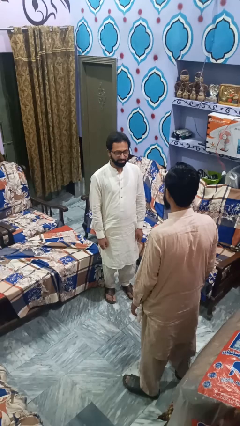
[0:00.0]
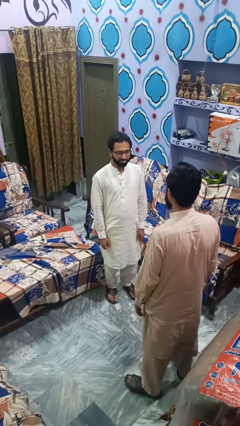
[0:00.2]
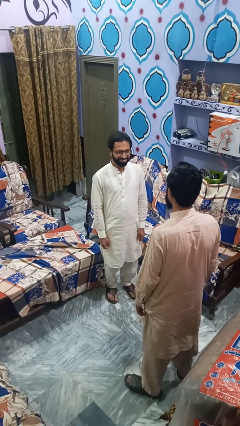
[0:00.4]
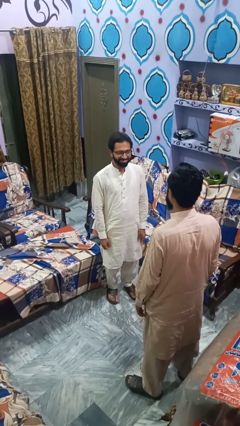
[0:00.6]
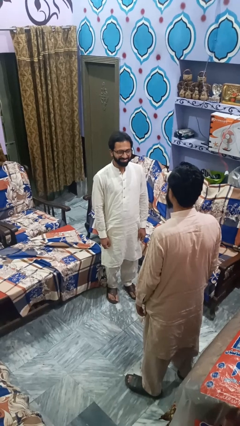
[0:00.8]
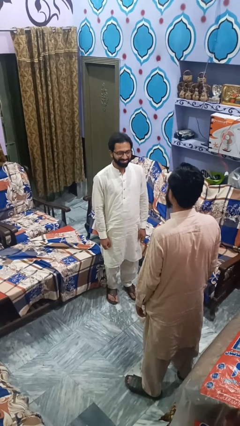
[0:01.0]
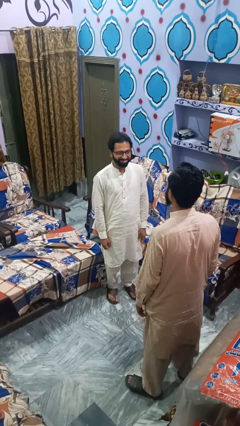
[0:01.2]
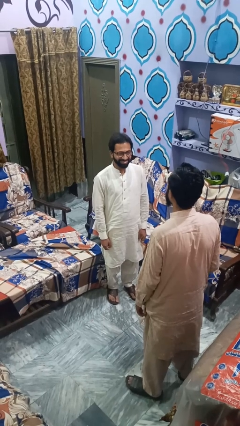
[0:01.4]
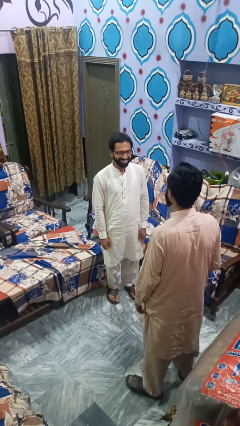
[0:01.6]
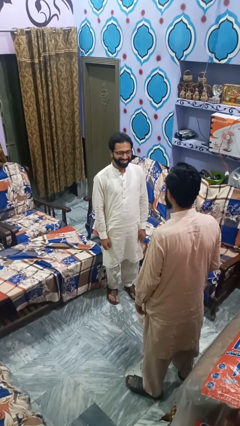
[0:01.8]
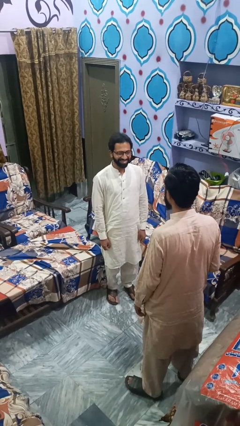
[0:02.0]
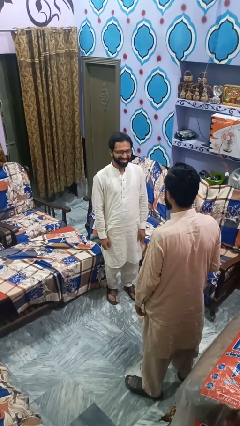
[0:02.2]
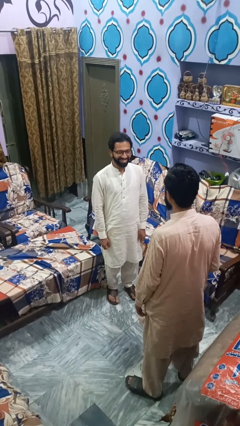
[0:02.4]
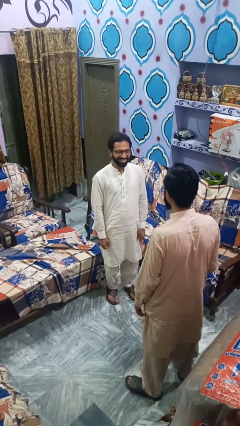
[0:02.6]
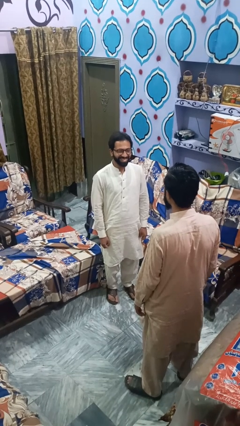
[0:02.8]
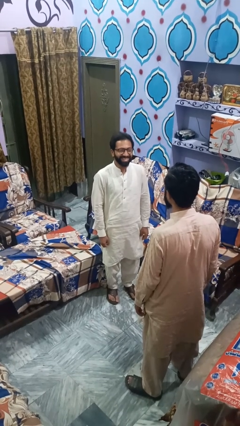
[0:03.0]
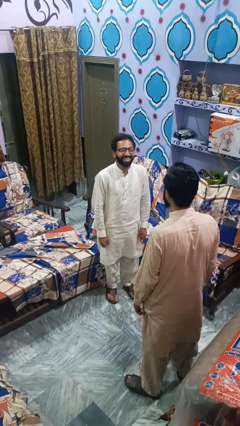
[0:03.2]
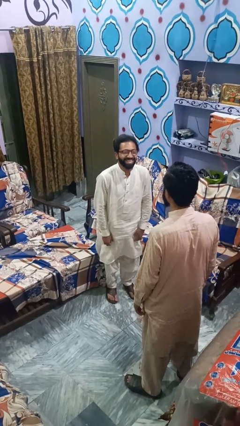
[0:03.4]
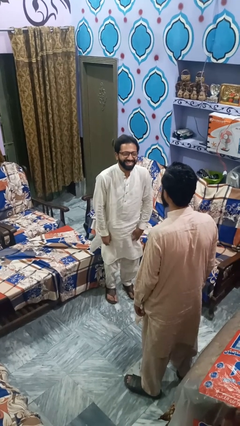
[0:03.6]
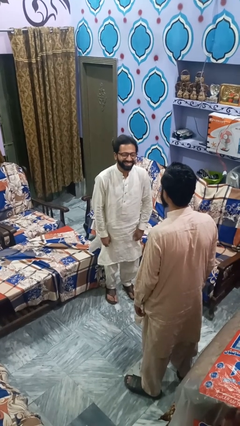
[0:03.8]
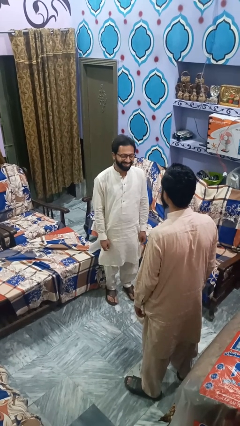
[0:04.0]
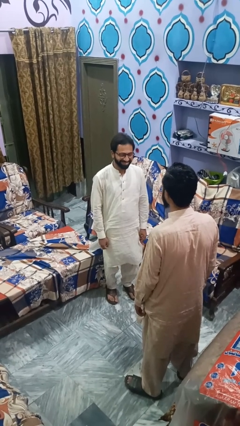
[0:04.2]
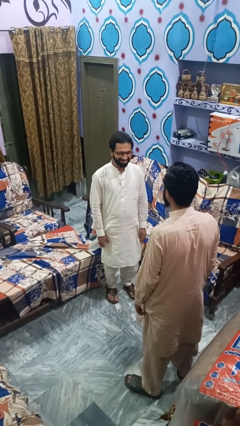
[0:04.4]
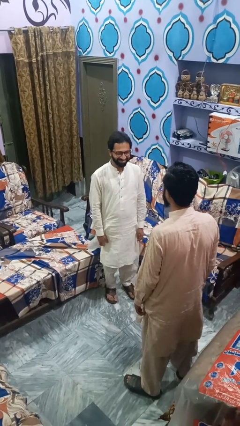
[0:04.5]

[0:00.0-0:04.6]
person laughs with person

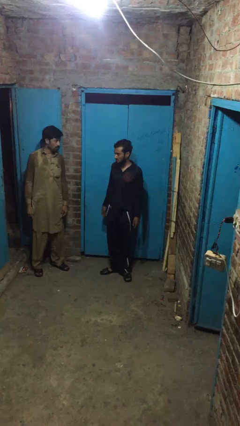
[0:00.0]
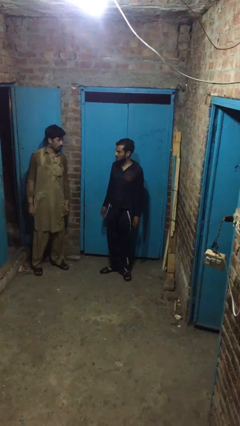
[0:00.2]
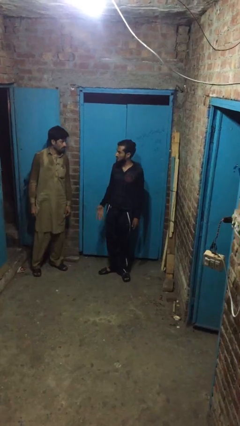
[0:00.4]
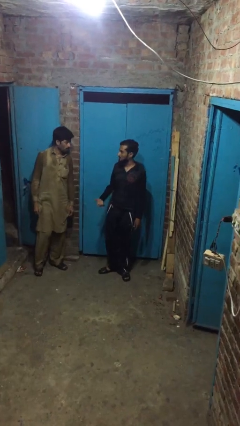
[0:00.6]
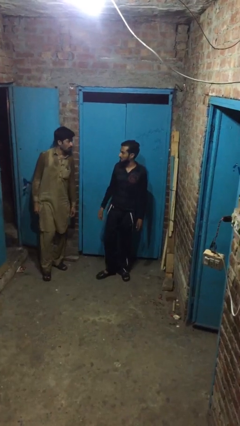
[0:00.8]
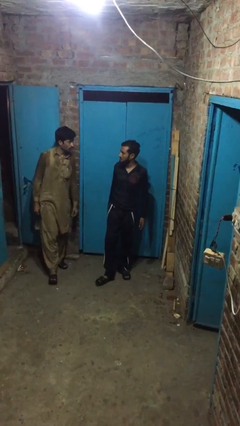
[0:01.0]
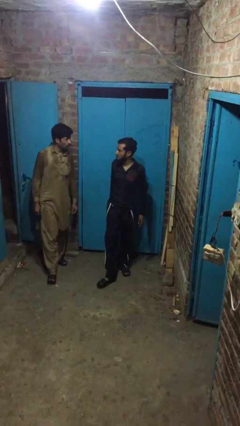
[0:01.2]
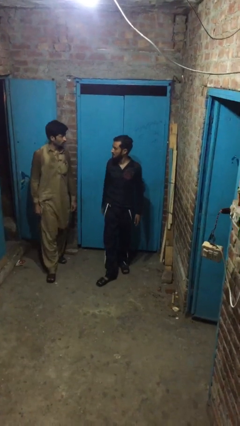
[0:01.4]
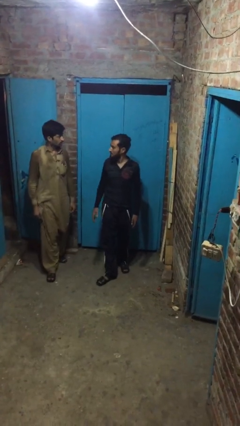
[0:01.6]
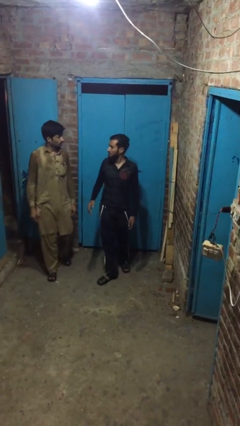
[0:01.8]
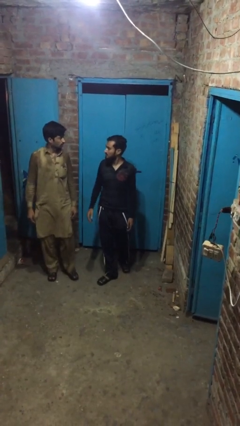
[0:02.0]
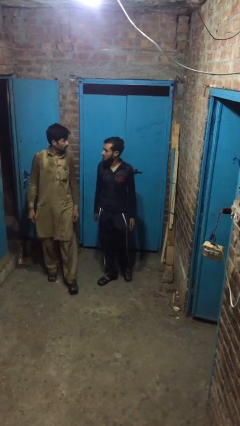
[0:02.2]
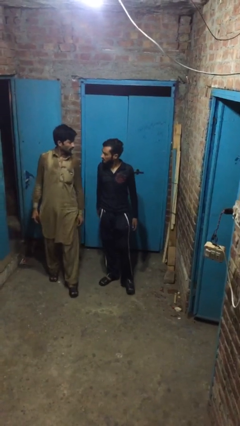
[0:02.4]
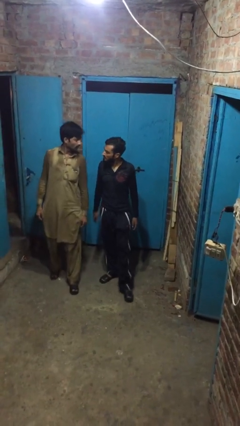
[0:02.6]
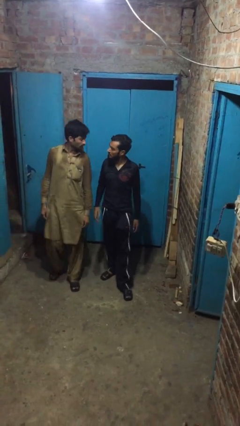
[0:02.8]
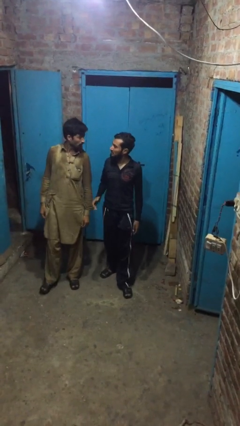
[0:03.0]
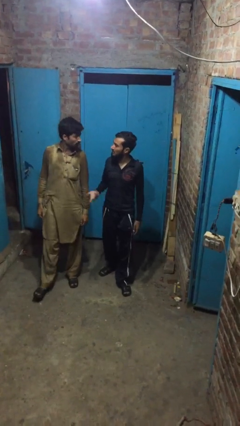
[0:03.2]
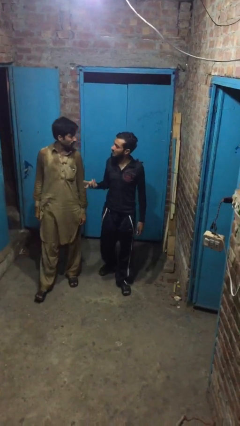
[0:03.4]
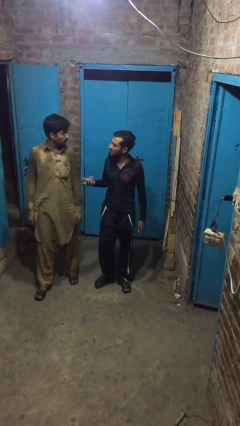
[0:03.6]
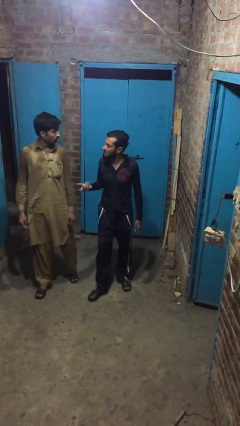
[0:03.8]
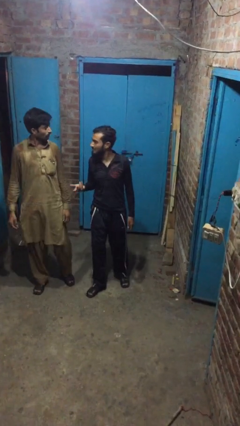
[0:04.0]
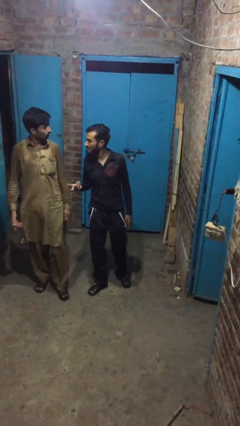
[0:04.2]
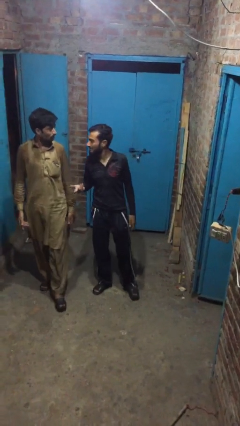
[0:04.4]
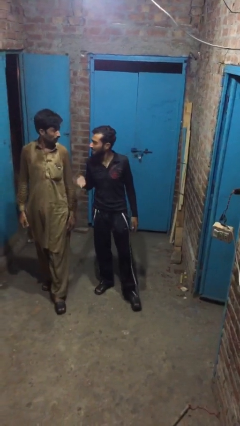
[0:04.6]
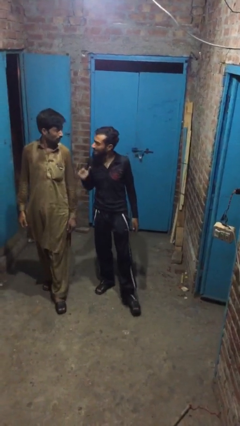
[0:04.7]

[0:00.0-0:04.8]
person talks to person

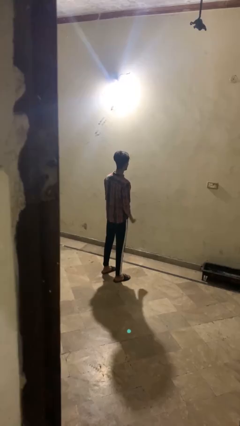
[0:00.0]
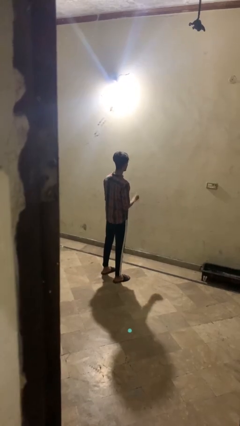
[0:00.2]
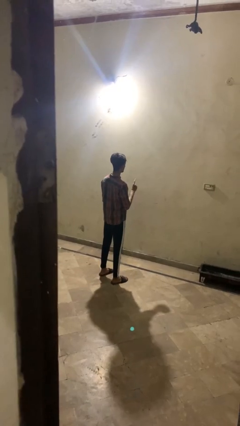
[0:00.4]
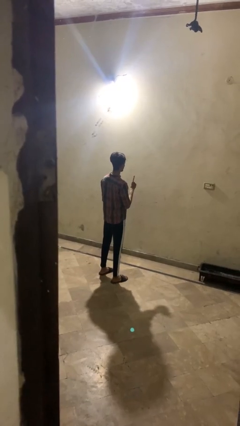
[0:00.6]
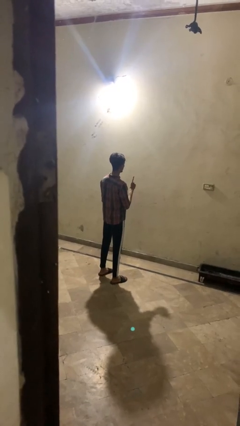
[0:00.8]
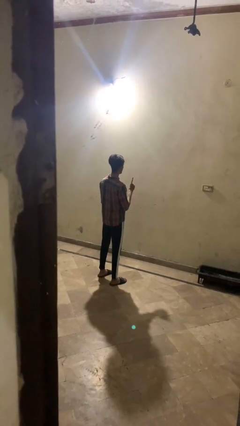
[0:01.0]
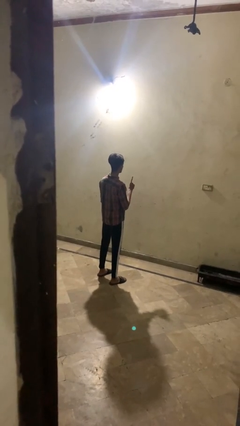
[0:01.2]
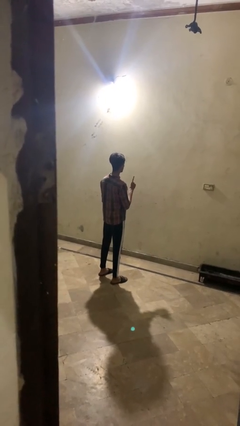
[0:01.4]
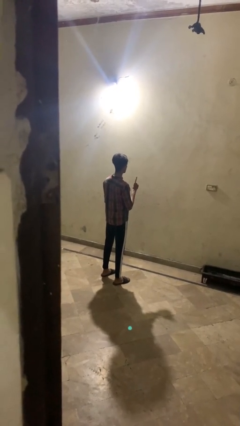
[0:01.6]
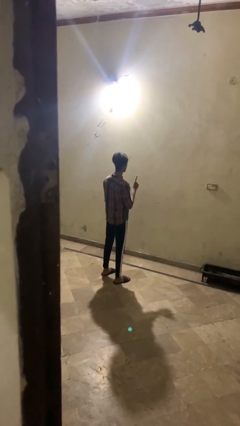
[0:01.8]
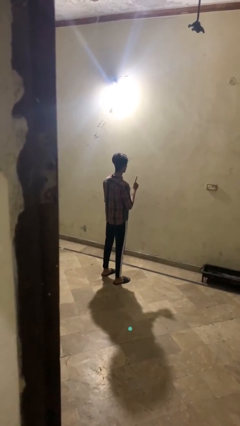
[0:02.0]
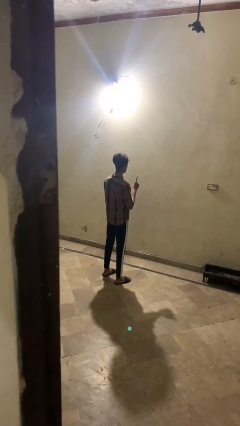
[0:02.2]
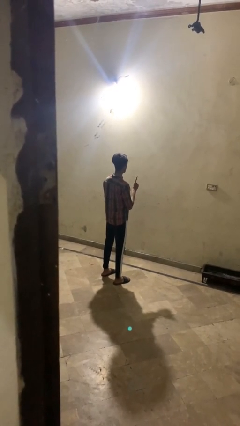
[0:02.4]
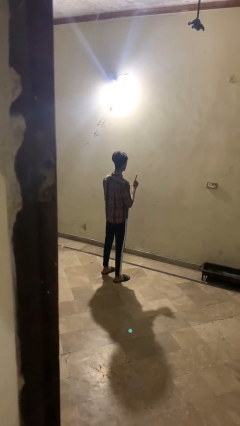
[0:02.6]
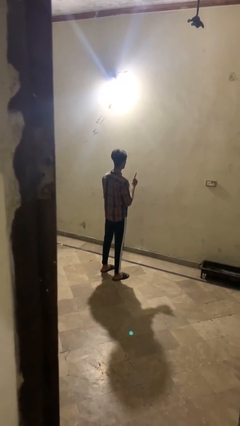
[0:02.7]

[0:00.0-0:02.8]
person gestures number one

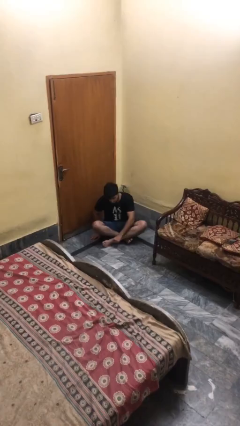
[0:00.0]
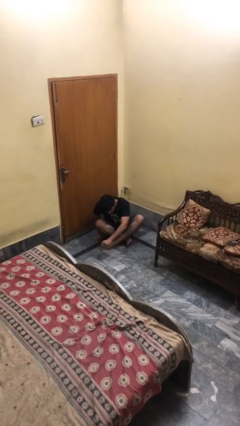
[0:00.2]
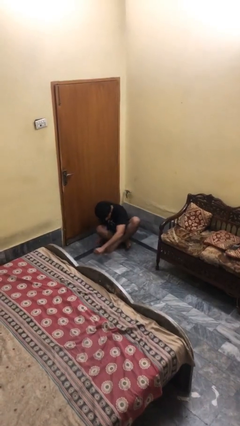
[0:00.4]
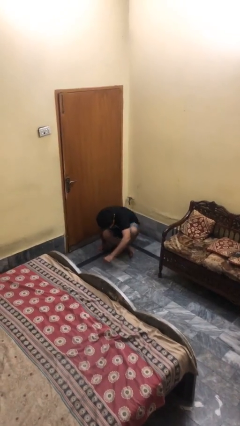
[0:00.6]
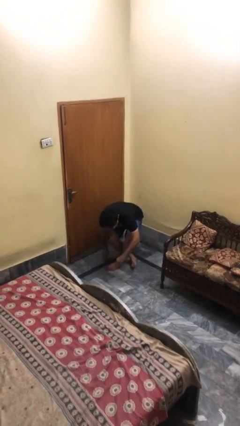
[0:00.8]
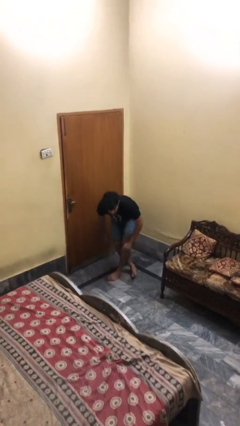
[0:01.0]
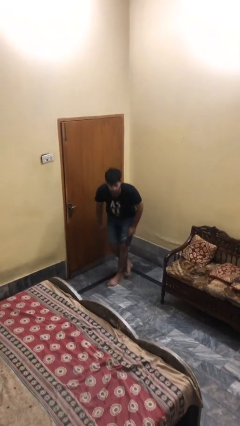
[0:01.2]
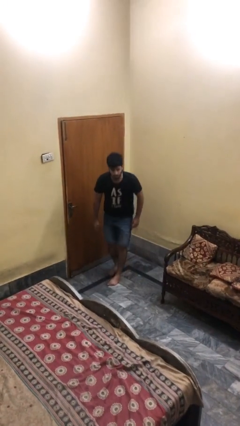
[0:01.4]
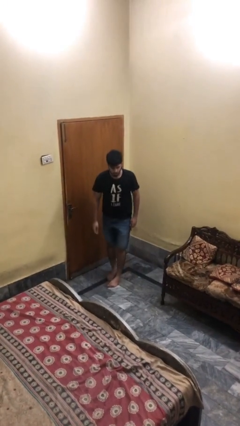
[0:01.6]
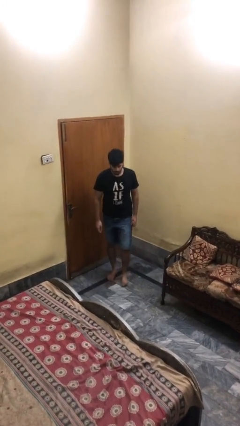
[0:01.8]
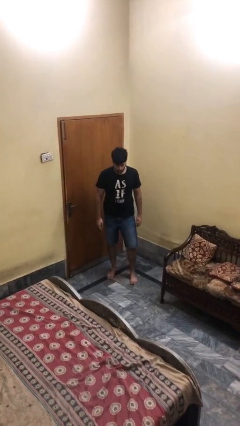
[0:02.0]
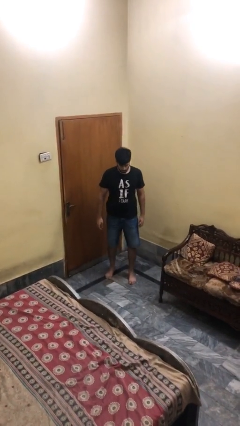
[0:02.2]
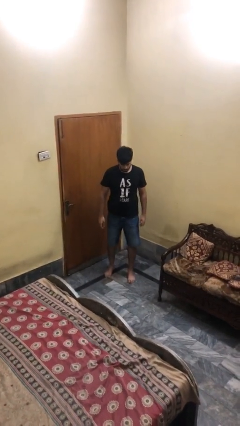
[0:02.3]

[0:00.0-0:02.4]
person stands up from floor

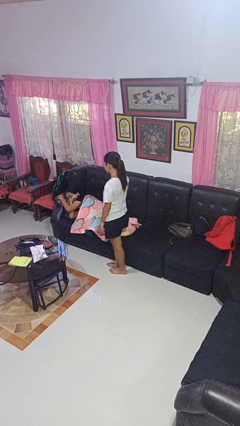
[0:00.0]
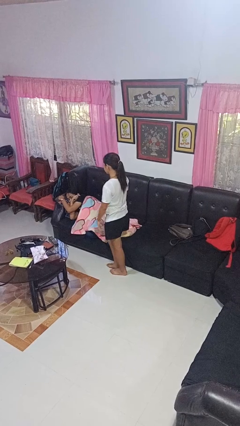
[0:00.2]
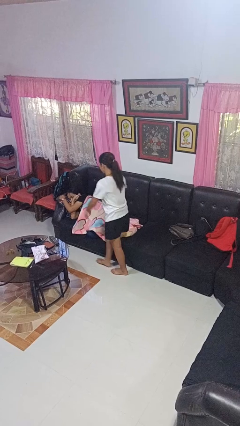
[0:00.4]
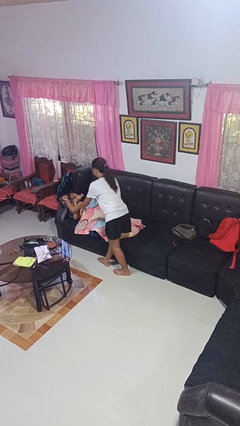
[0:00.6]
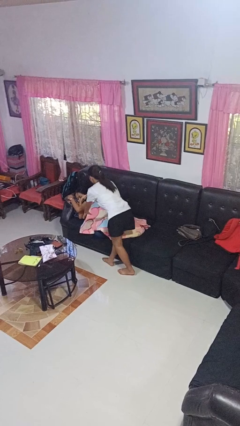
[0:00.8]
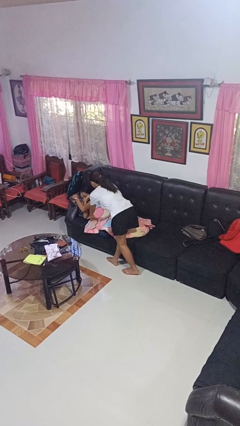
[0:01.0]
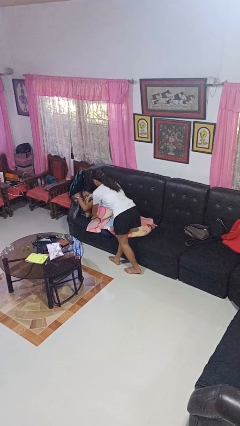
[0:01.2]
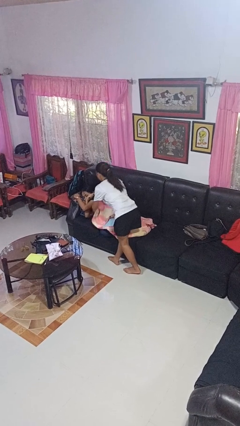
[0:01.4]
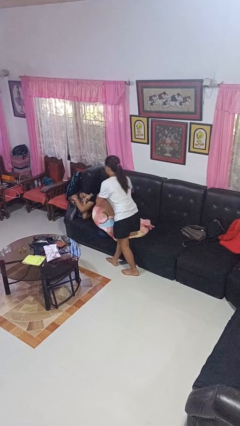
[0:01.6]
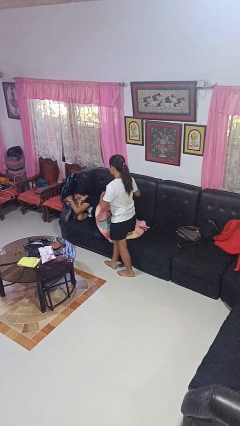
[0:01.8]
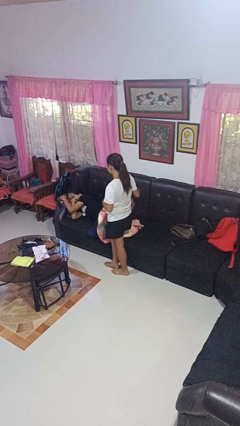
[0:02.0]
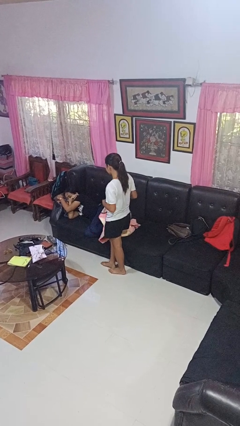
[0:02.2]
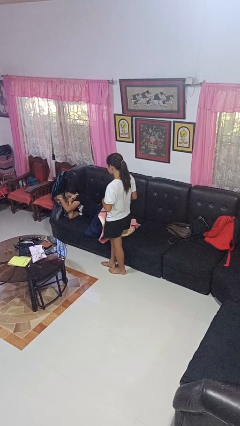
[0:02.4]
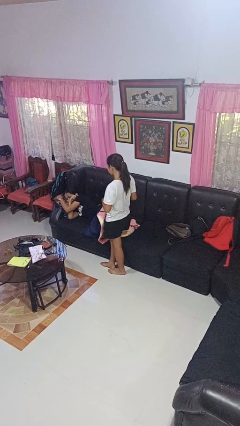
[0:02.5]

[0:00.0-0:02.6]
person uncovers friend with blanket

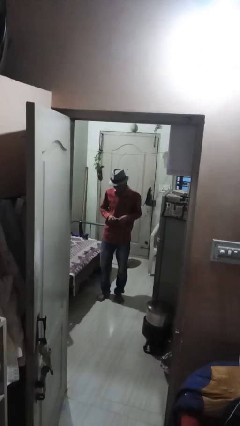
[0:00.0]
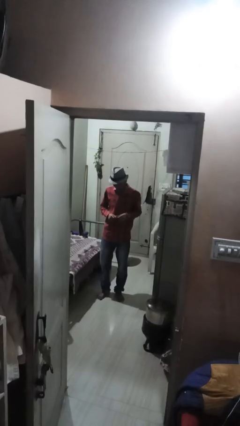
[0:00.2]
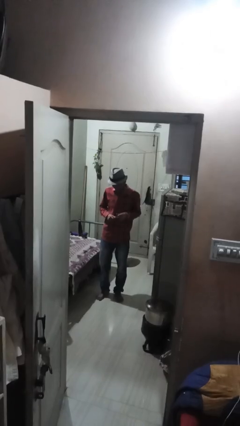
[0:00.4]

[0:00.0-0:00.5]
person touches earlobe
